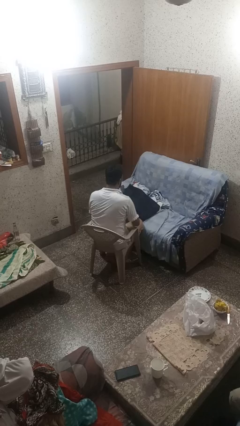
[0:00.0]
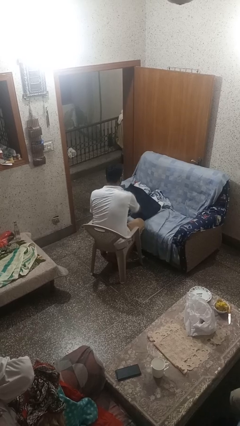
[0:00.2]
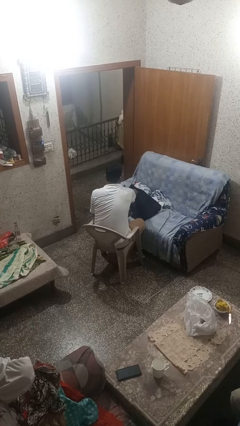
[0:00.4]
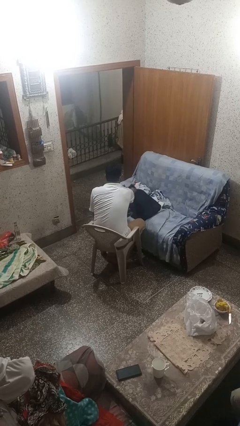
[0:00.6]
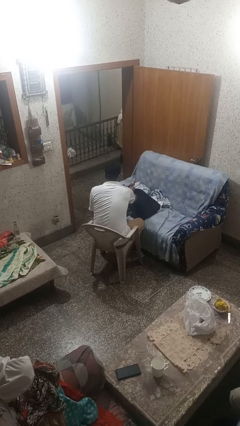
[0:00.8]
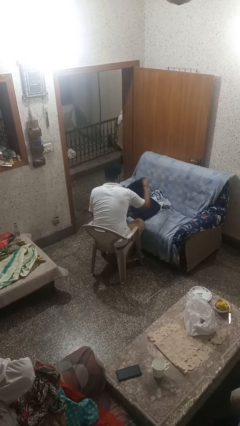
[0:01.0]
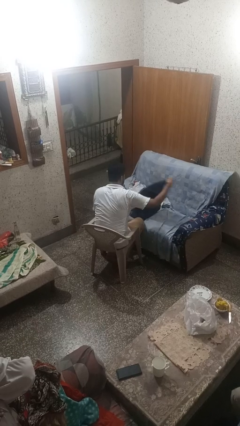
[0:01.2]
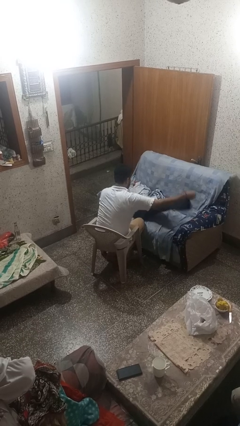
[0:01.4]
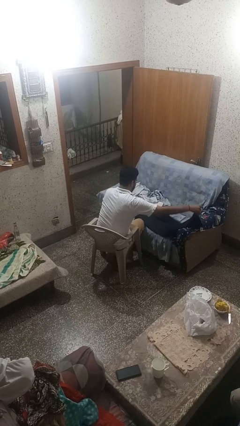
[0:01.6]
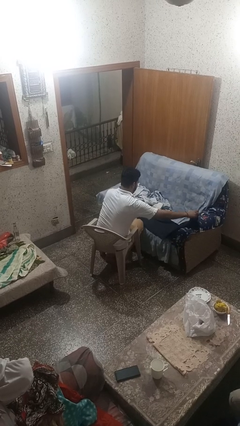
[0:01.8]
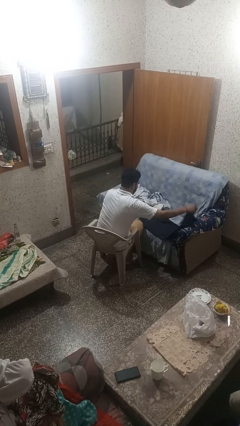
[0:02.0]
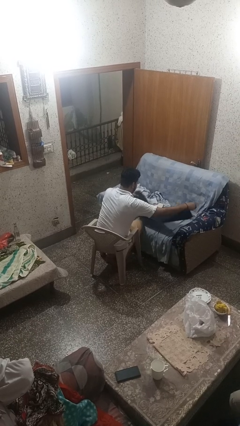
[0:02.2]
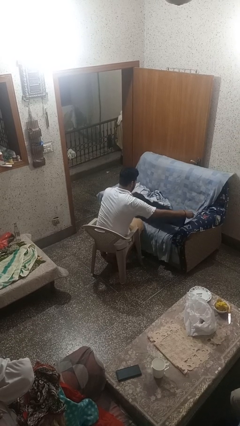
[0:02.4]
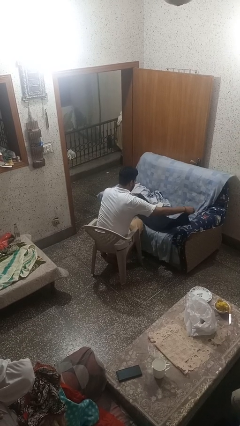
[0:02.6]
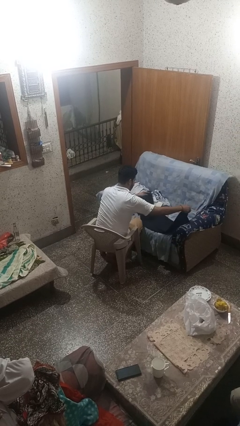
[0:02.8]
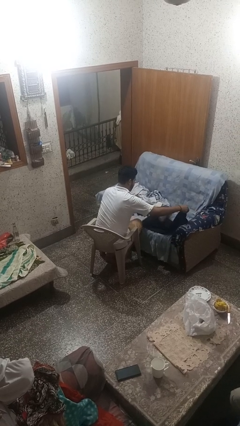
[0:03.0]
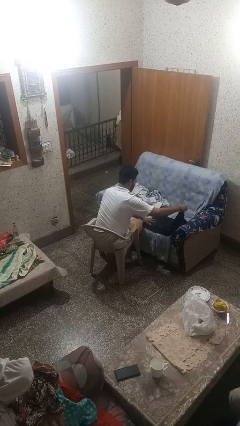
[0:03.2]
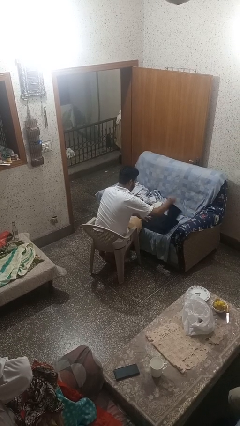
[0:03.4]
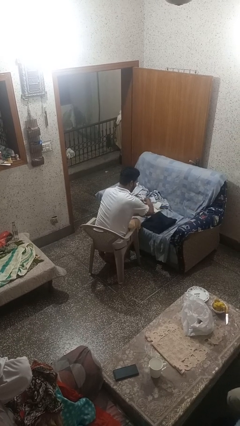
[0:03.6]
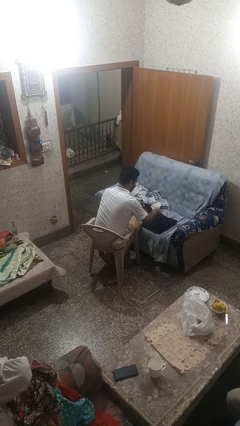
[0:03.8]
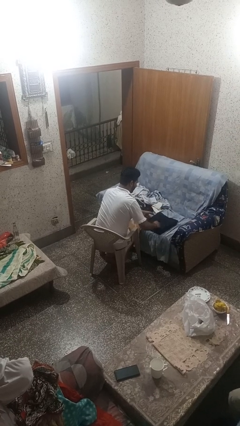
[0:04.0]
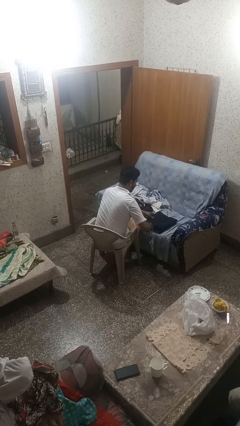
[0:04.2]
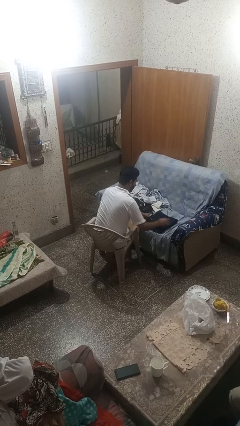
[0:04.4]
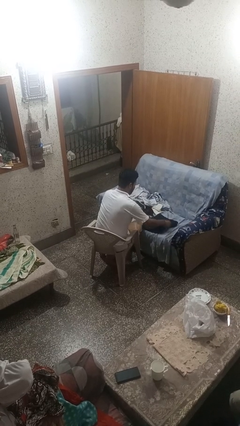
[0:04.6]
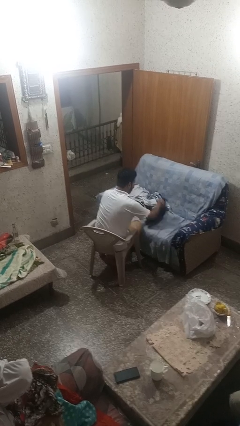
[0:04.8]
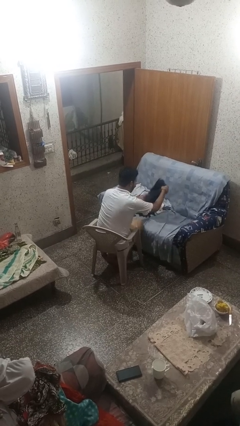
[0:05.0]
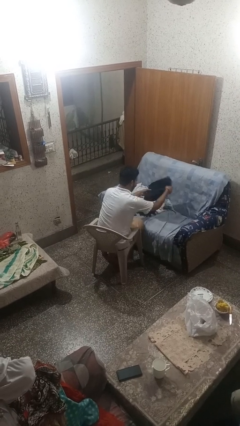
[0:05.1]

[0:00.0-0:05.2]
person folds pants

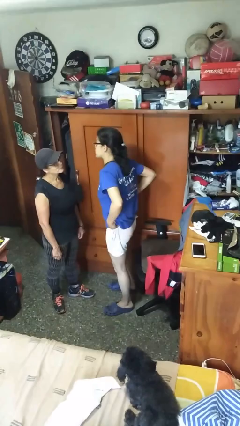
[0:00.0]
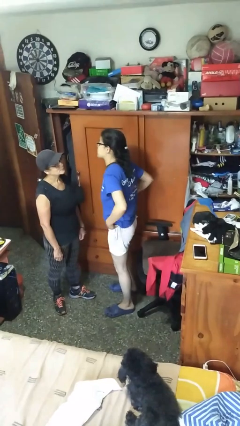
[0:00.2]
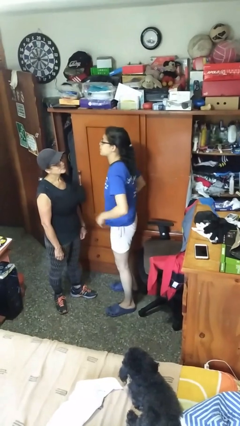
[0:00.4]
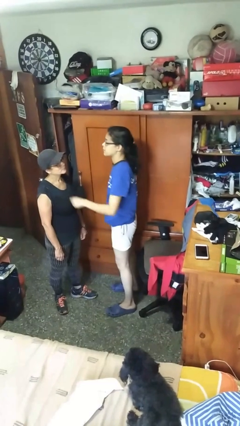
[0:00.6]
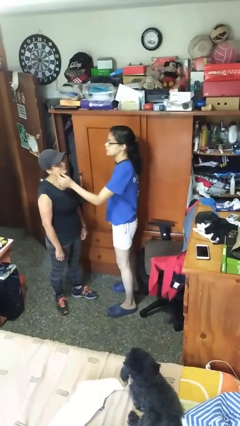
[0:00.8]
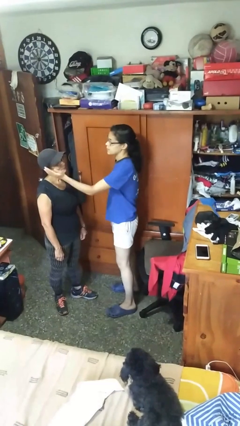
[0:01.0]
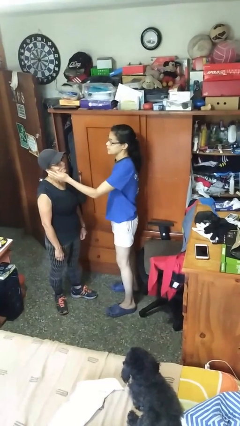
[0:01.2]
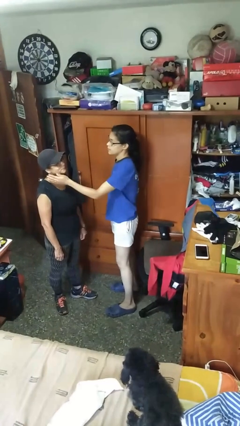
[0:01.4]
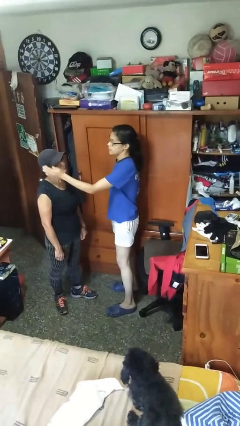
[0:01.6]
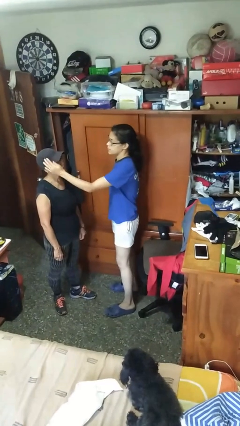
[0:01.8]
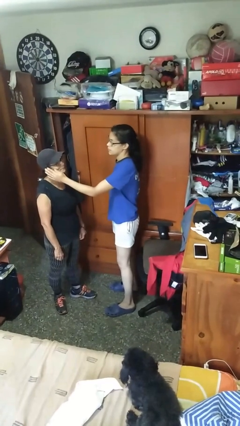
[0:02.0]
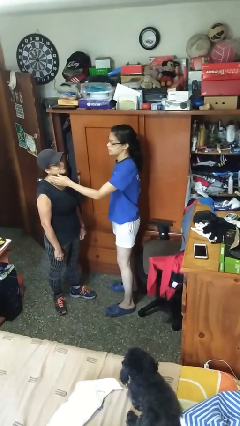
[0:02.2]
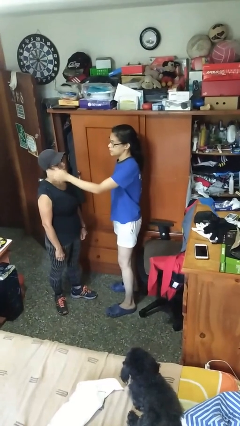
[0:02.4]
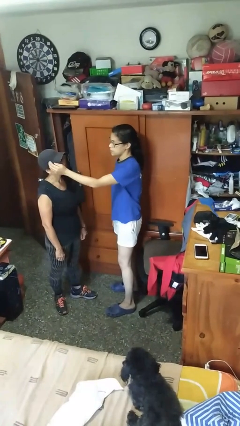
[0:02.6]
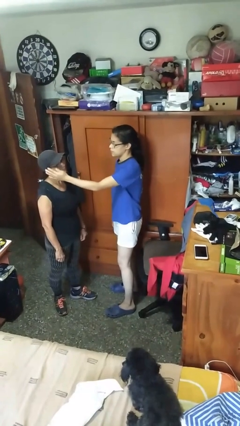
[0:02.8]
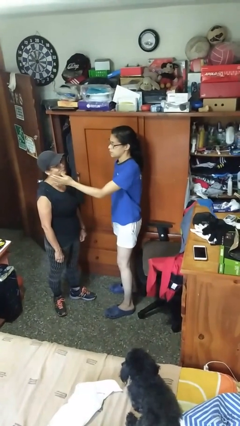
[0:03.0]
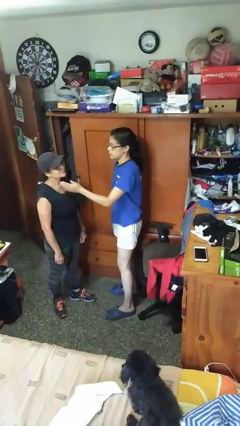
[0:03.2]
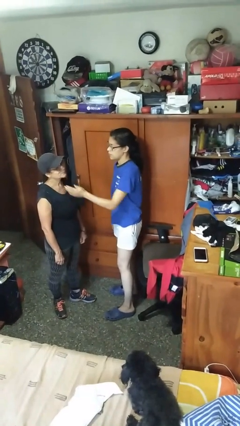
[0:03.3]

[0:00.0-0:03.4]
person touches face of person

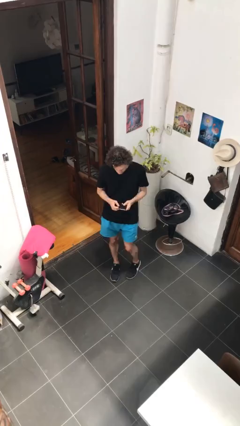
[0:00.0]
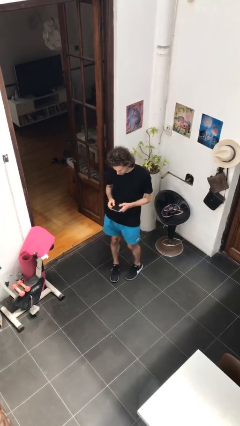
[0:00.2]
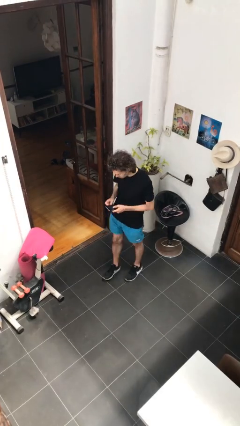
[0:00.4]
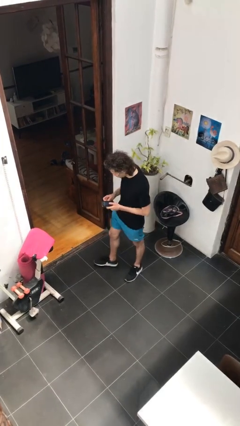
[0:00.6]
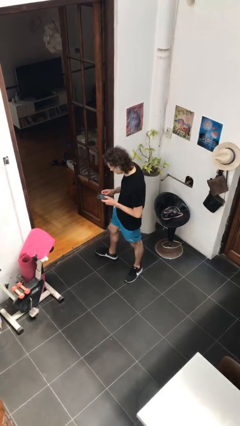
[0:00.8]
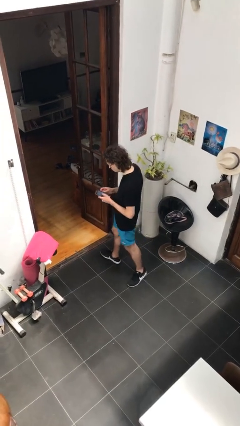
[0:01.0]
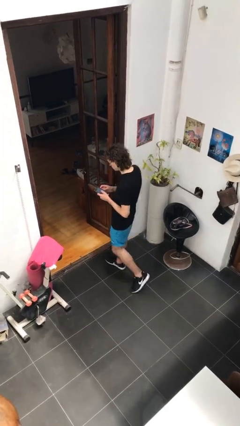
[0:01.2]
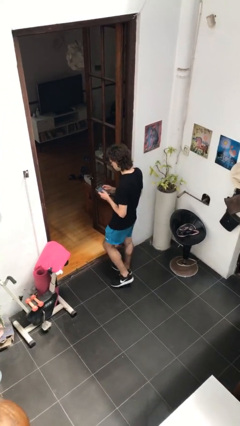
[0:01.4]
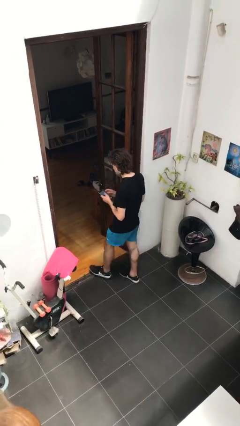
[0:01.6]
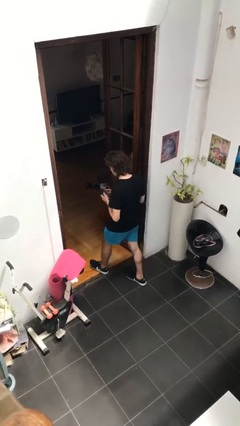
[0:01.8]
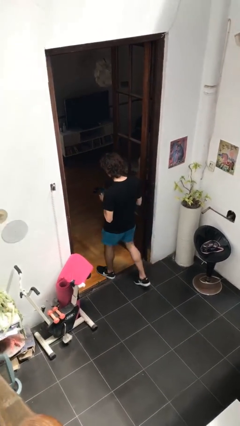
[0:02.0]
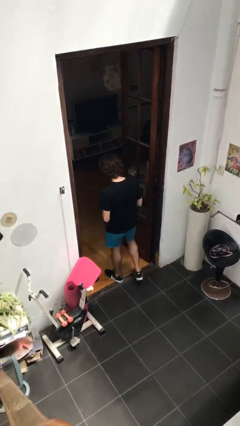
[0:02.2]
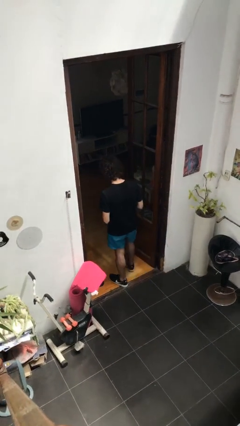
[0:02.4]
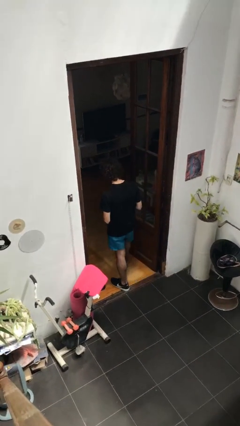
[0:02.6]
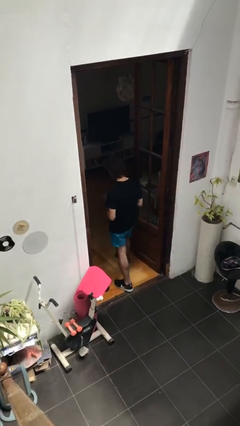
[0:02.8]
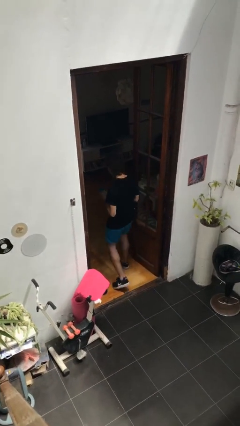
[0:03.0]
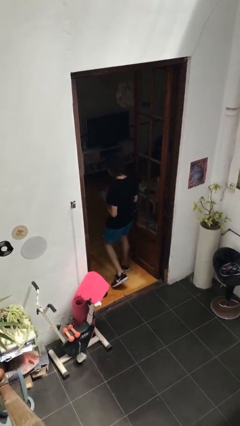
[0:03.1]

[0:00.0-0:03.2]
person exits scene through structure

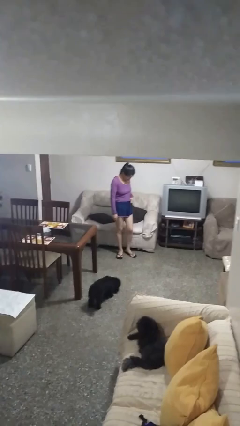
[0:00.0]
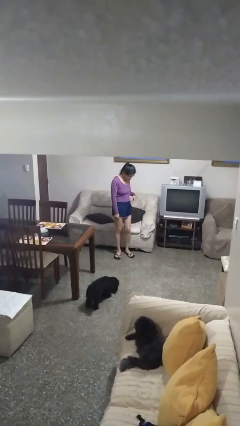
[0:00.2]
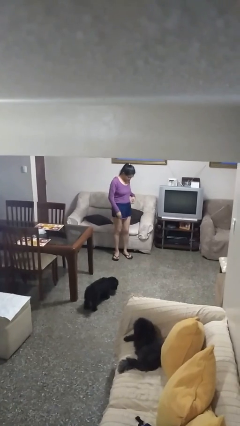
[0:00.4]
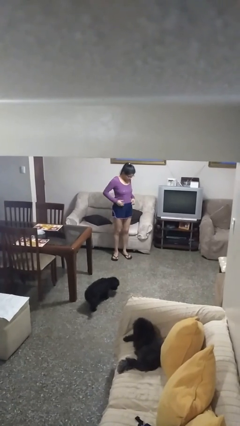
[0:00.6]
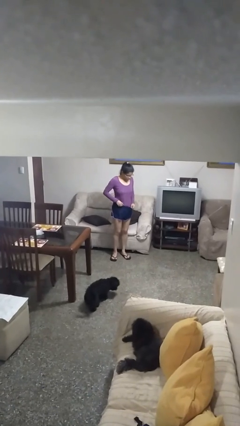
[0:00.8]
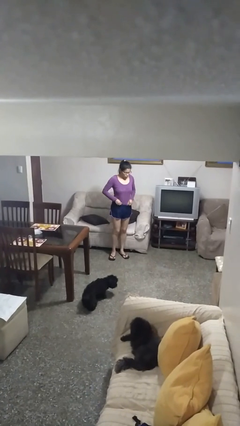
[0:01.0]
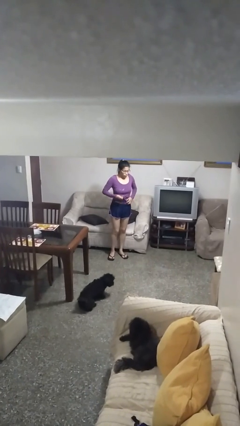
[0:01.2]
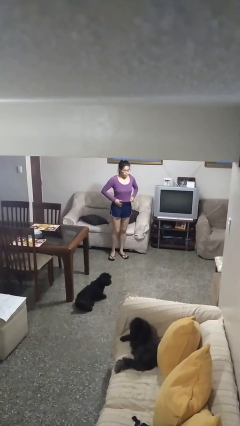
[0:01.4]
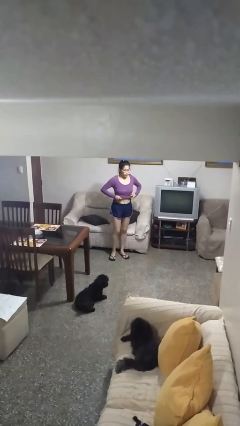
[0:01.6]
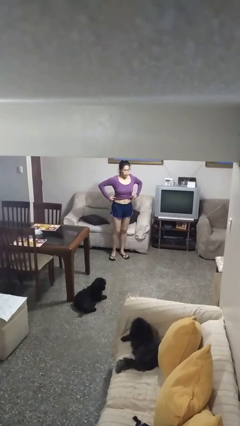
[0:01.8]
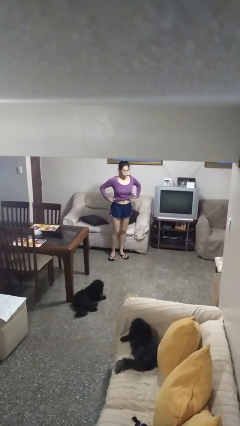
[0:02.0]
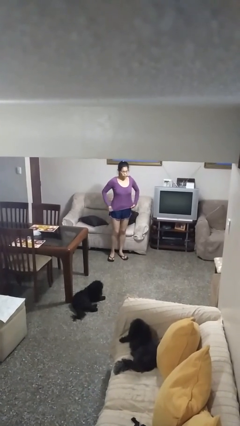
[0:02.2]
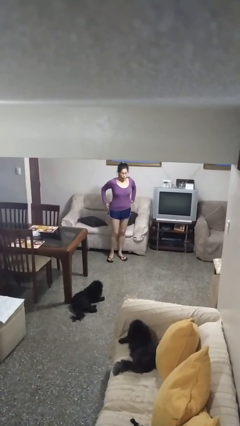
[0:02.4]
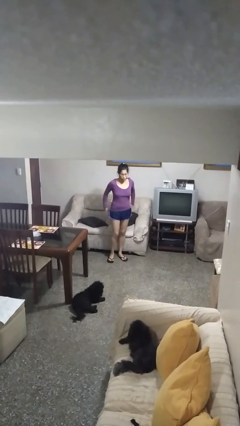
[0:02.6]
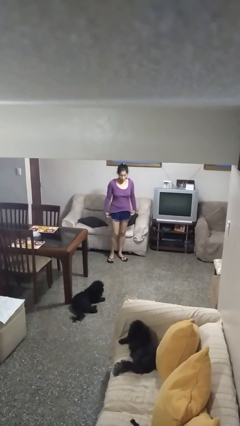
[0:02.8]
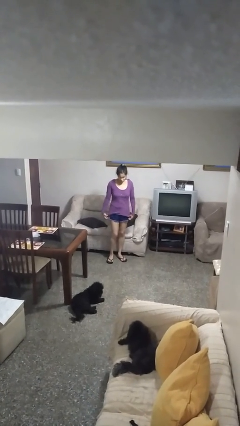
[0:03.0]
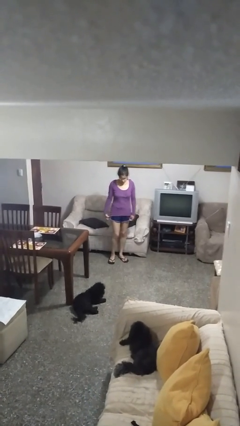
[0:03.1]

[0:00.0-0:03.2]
person untucks shirt

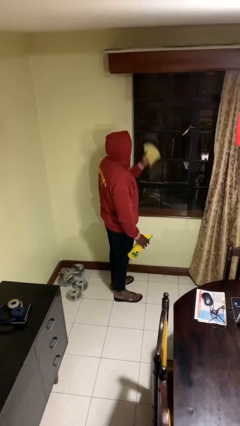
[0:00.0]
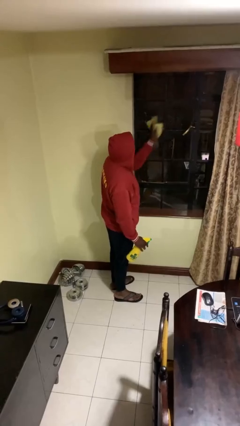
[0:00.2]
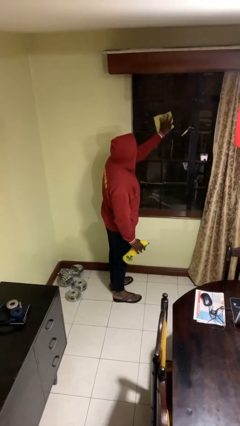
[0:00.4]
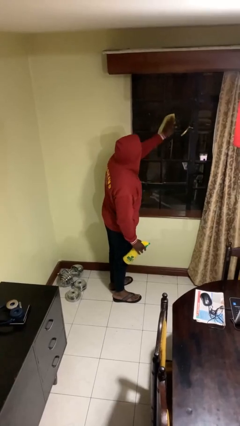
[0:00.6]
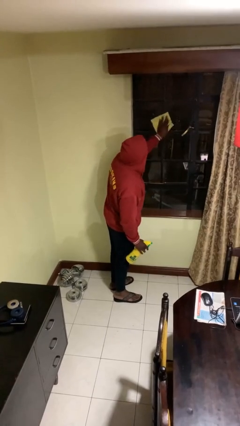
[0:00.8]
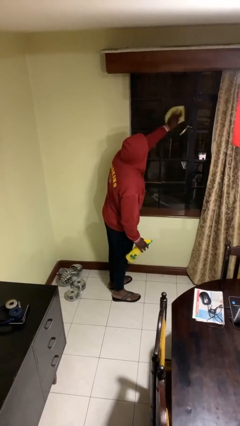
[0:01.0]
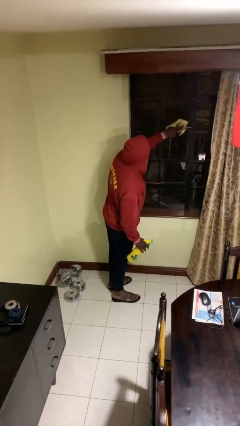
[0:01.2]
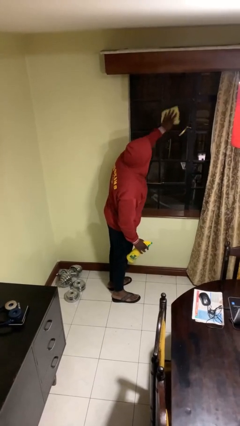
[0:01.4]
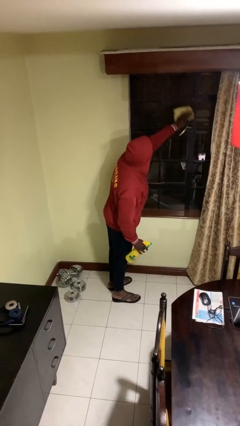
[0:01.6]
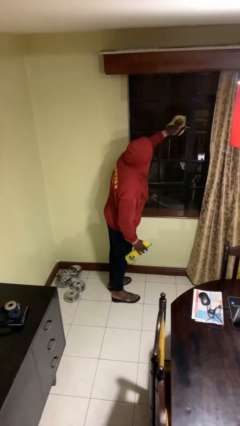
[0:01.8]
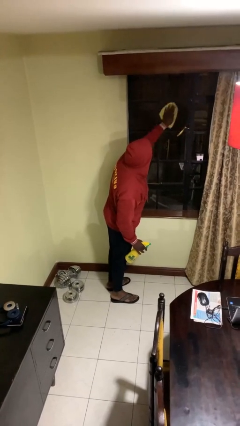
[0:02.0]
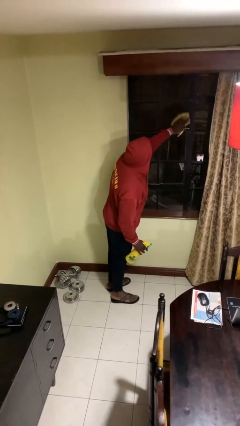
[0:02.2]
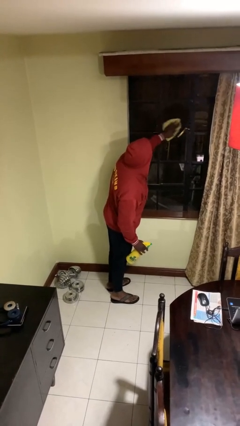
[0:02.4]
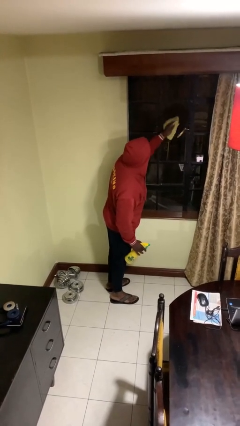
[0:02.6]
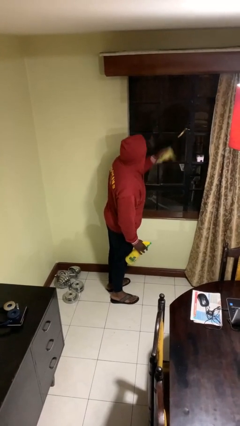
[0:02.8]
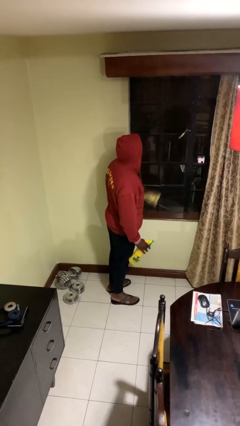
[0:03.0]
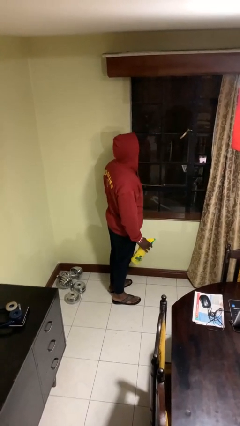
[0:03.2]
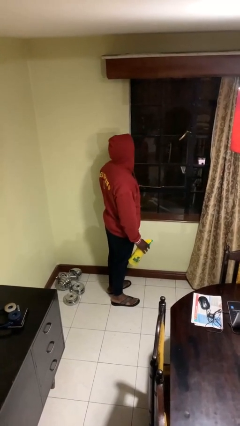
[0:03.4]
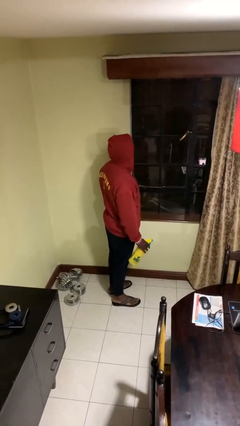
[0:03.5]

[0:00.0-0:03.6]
person washes window
